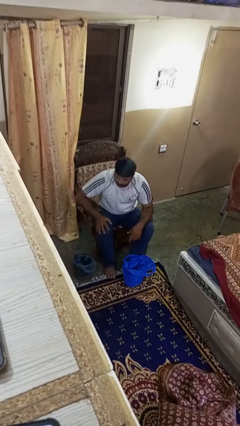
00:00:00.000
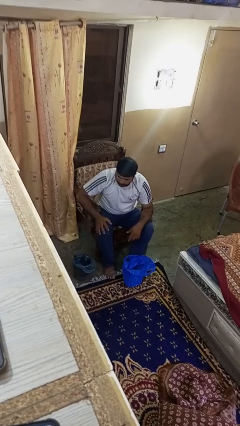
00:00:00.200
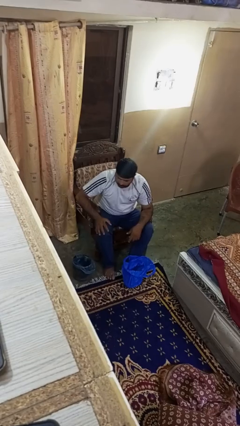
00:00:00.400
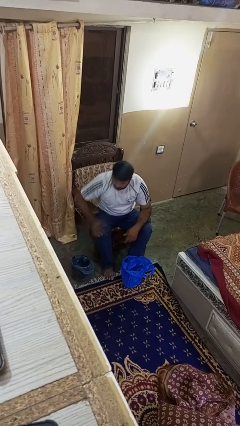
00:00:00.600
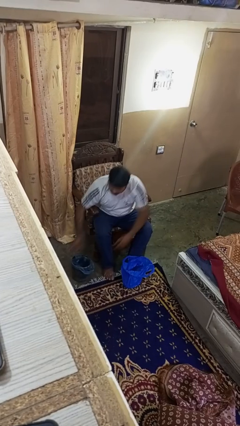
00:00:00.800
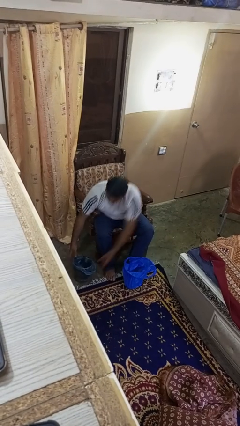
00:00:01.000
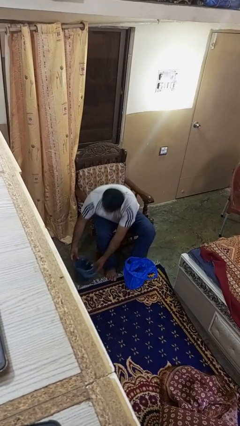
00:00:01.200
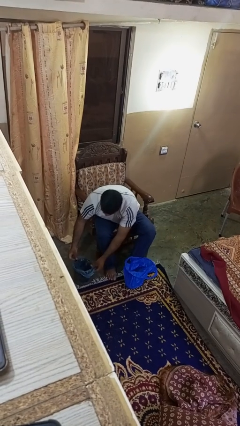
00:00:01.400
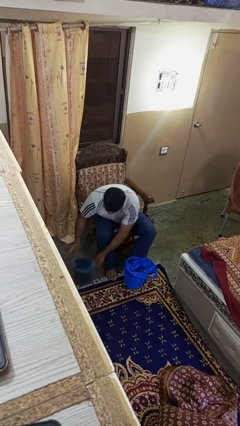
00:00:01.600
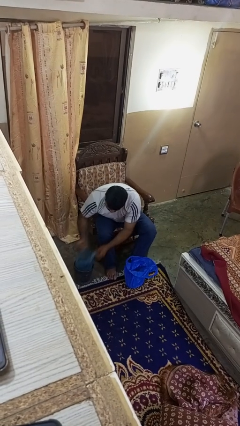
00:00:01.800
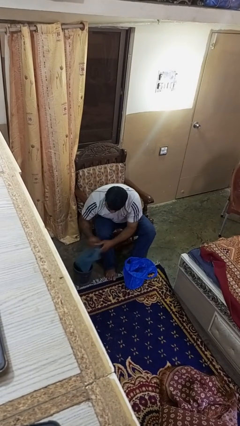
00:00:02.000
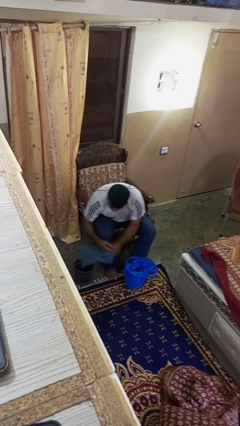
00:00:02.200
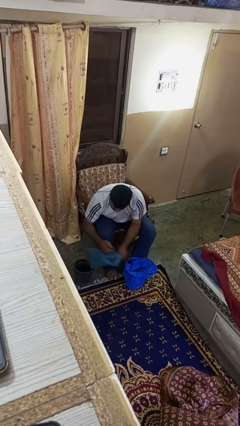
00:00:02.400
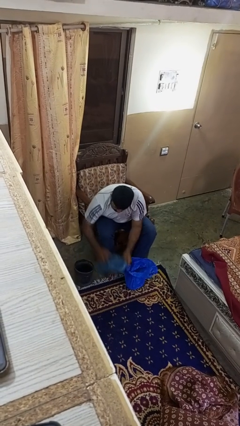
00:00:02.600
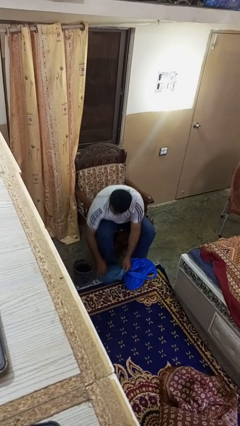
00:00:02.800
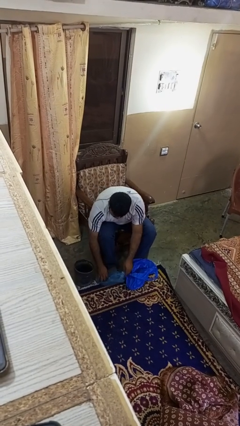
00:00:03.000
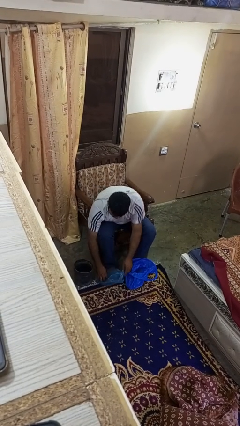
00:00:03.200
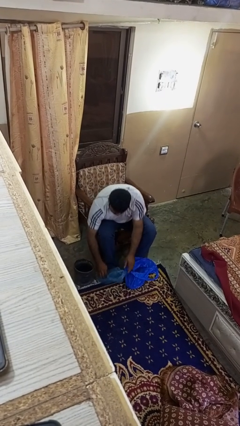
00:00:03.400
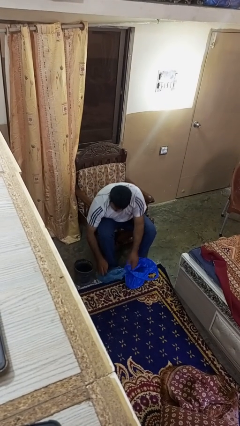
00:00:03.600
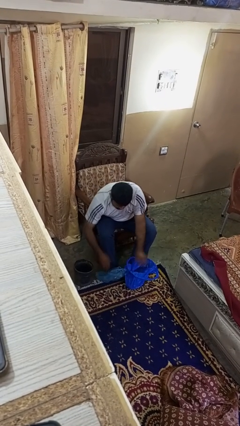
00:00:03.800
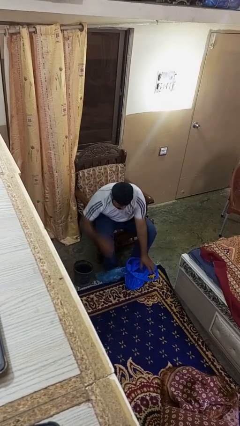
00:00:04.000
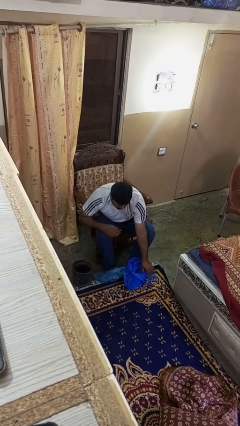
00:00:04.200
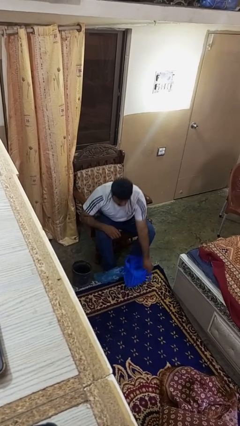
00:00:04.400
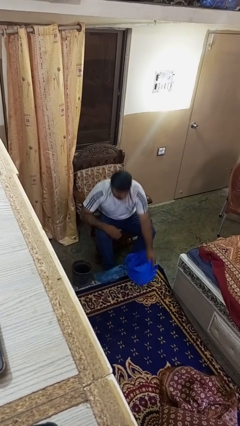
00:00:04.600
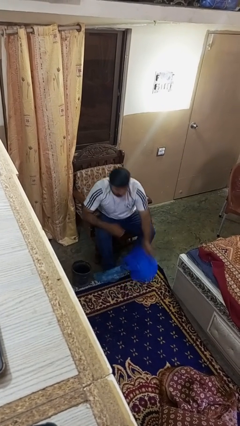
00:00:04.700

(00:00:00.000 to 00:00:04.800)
person removes trashbag from trashcan

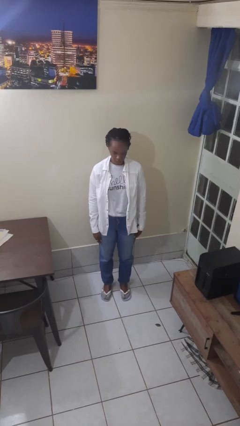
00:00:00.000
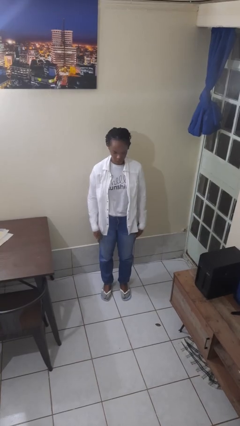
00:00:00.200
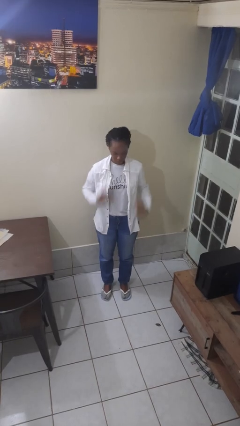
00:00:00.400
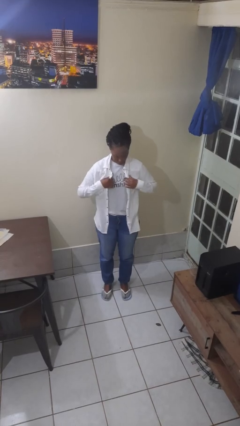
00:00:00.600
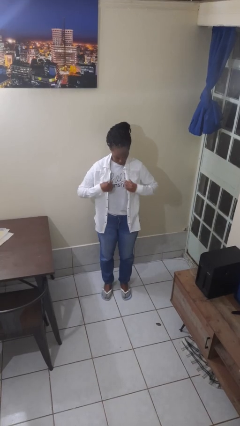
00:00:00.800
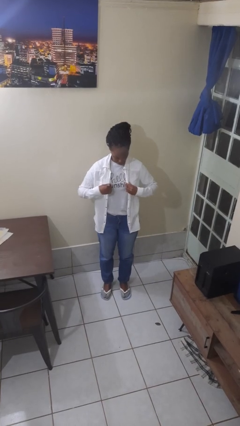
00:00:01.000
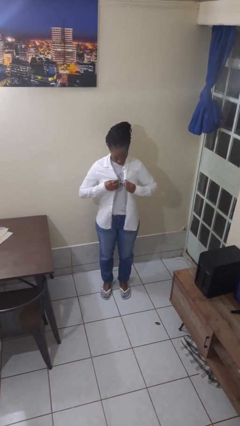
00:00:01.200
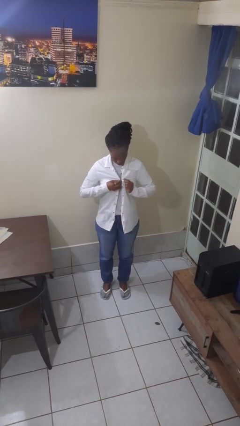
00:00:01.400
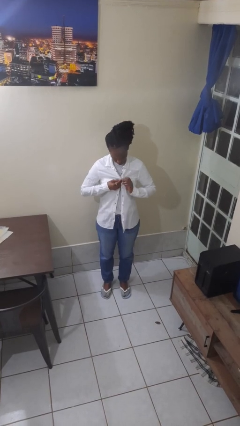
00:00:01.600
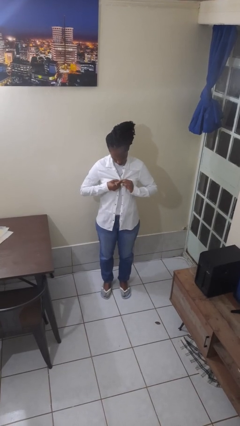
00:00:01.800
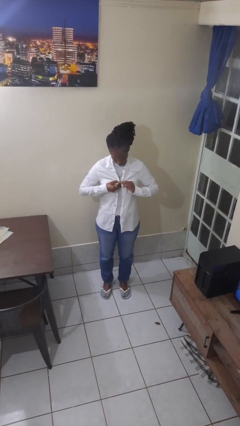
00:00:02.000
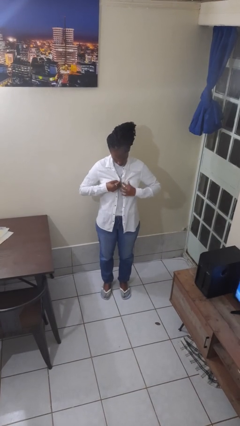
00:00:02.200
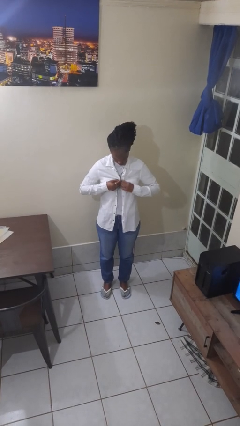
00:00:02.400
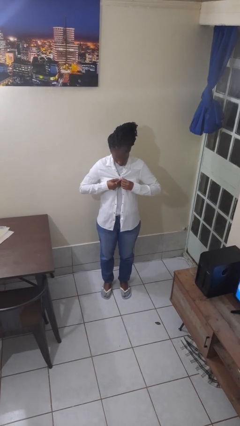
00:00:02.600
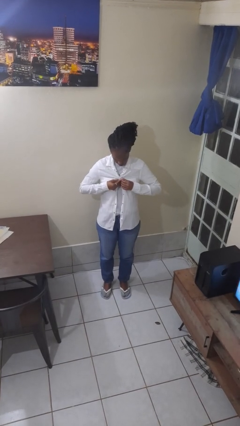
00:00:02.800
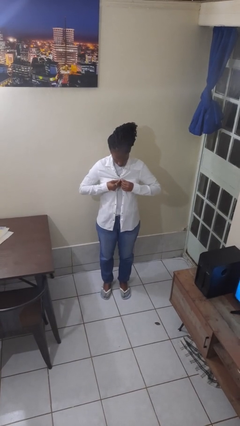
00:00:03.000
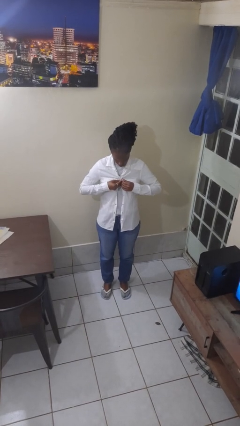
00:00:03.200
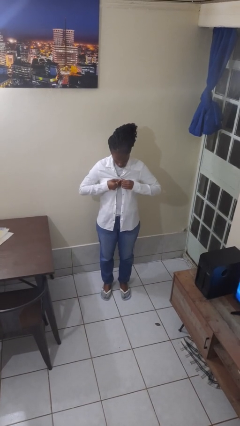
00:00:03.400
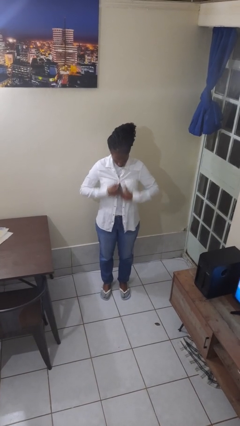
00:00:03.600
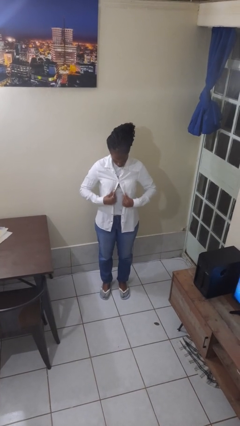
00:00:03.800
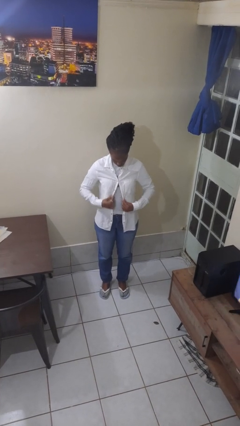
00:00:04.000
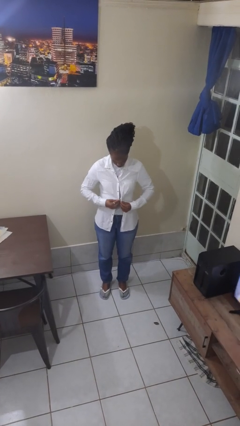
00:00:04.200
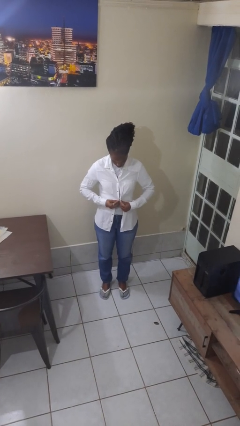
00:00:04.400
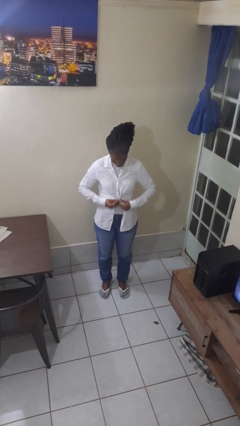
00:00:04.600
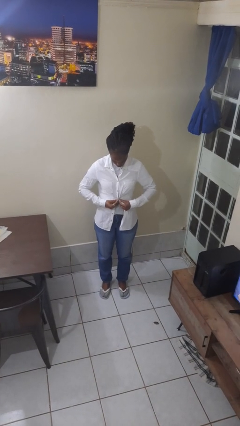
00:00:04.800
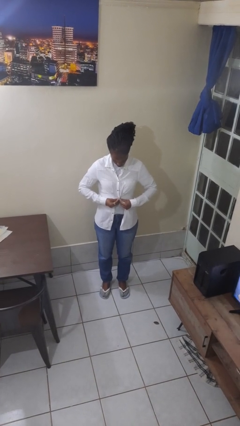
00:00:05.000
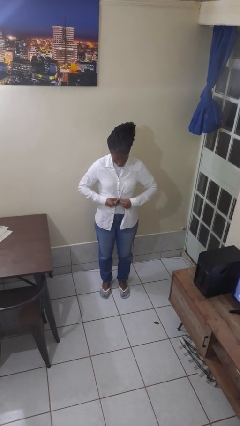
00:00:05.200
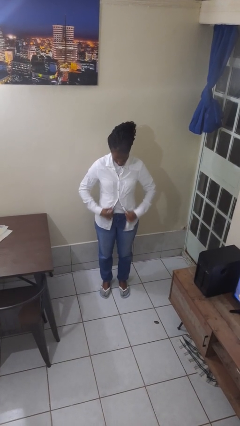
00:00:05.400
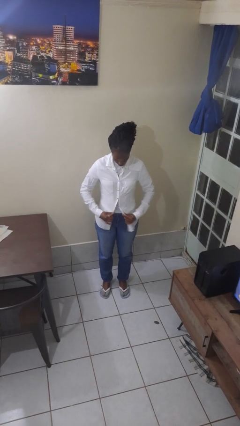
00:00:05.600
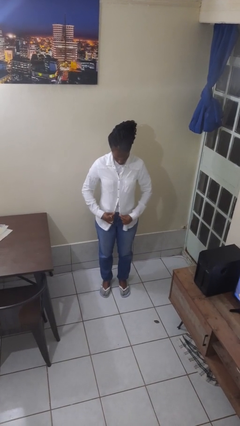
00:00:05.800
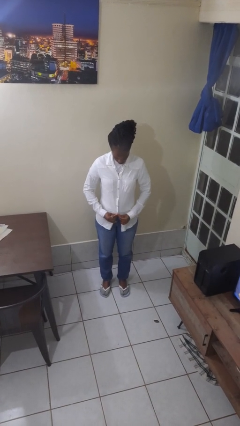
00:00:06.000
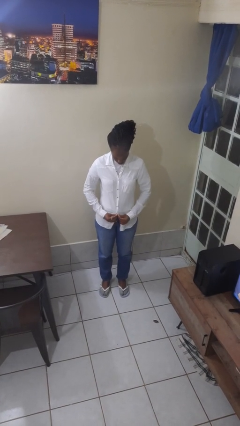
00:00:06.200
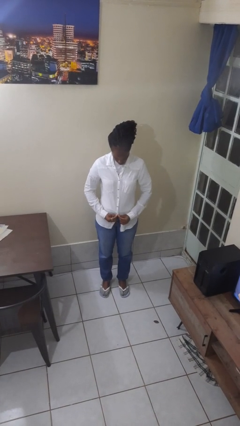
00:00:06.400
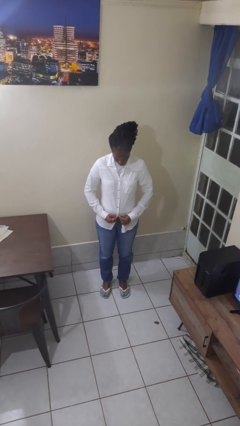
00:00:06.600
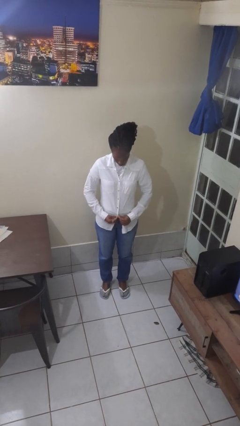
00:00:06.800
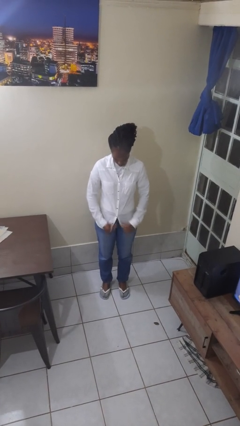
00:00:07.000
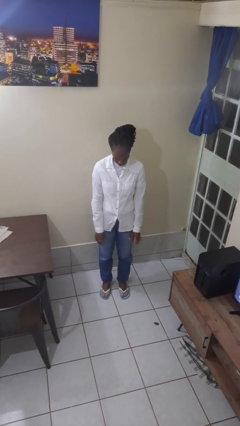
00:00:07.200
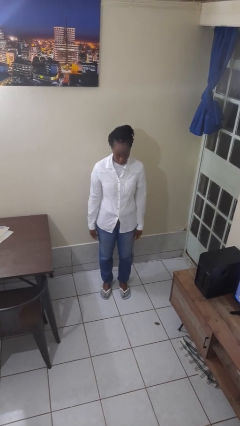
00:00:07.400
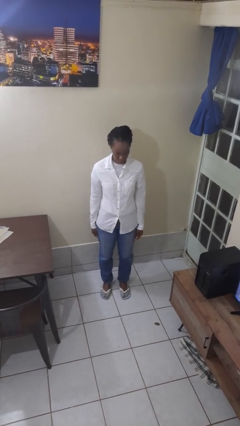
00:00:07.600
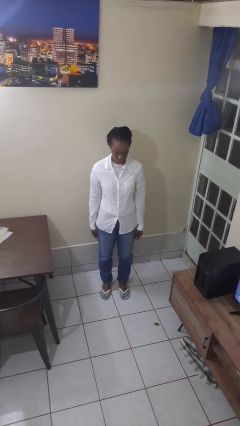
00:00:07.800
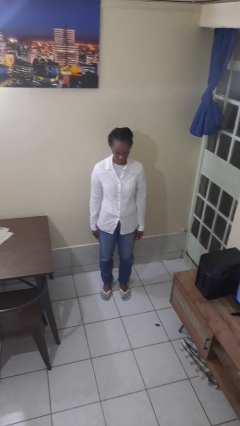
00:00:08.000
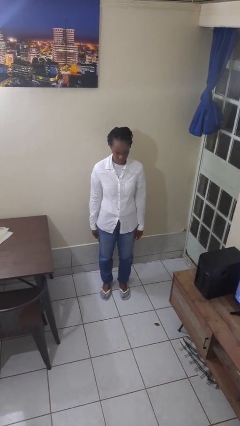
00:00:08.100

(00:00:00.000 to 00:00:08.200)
person buttons shirt

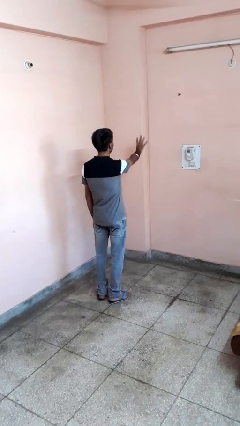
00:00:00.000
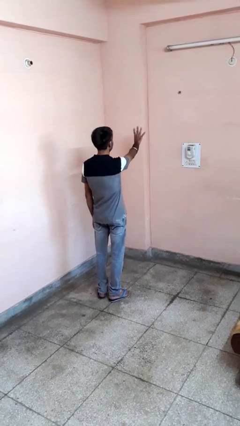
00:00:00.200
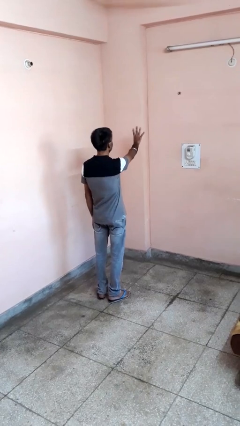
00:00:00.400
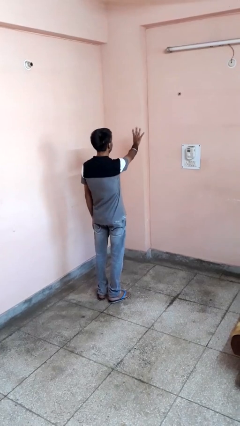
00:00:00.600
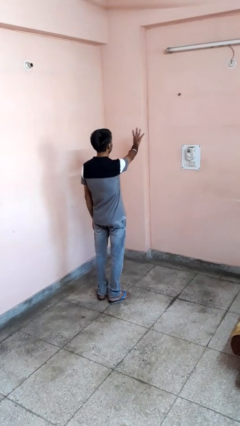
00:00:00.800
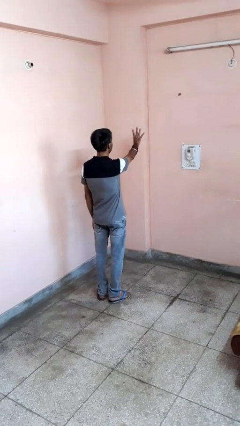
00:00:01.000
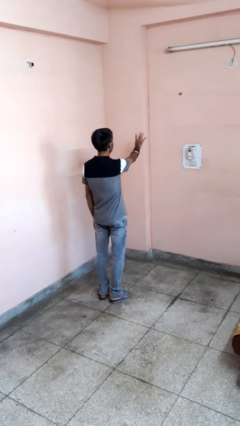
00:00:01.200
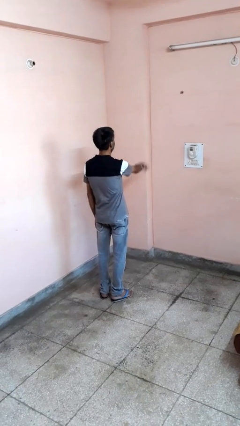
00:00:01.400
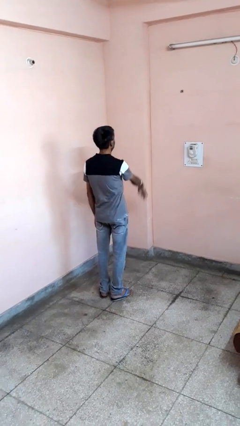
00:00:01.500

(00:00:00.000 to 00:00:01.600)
person gestures number four

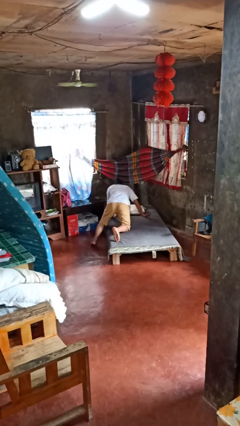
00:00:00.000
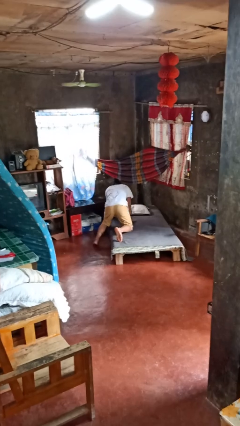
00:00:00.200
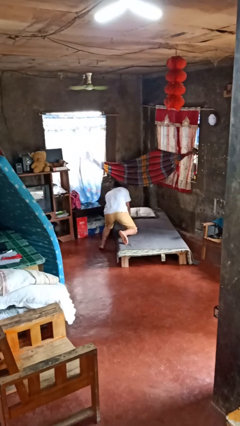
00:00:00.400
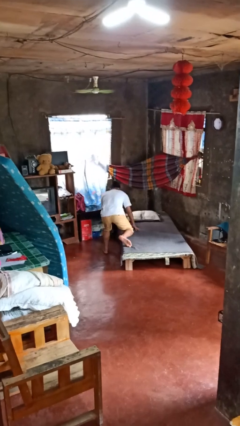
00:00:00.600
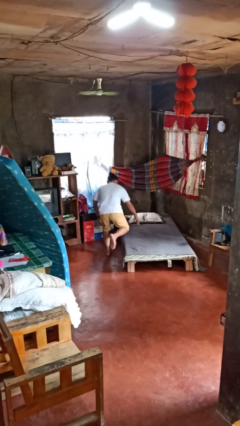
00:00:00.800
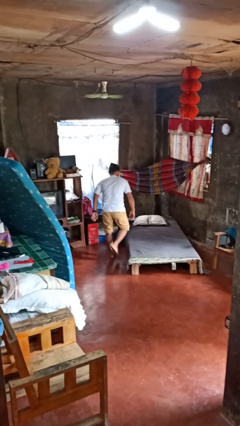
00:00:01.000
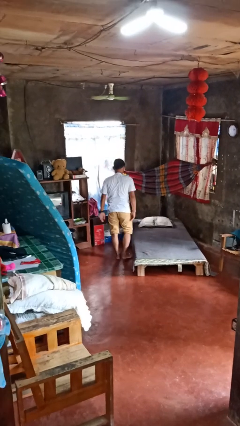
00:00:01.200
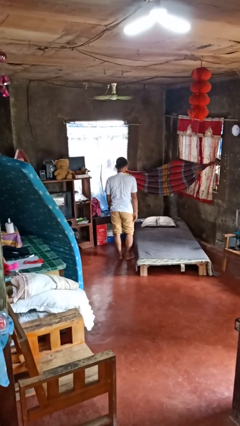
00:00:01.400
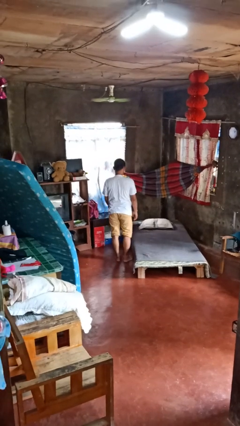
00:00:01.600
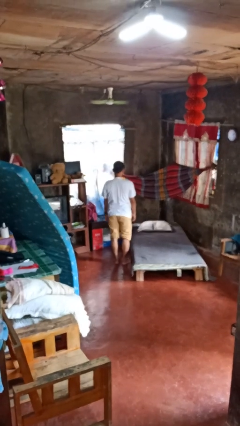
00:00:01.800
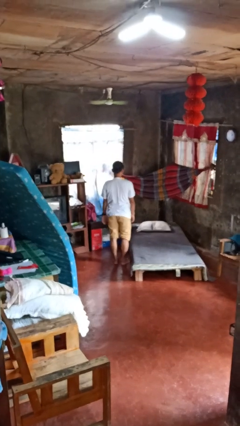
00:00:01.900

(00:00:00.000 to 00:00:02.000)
person stands up

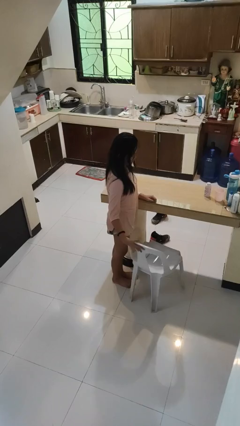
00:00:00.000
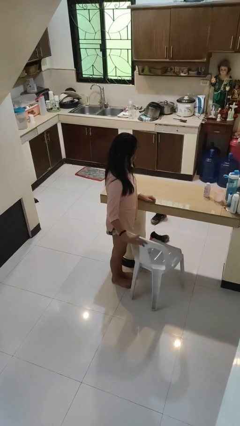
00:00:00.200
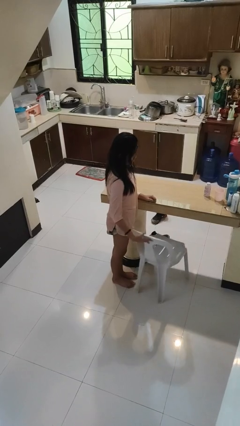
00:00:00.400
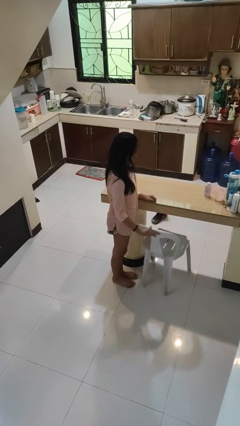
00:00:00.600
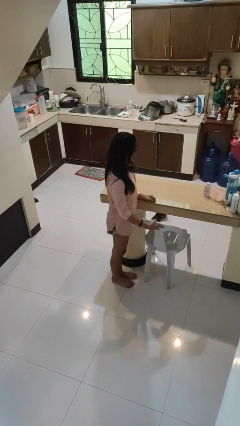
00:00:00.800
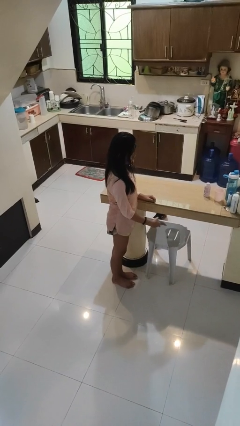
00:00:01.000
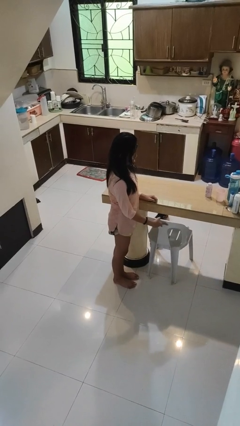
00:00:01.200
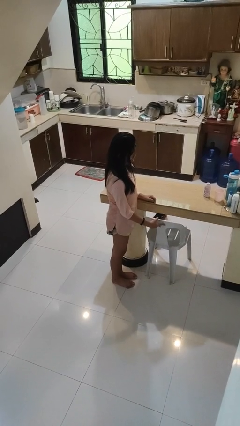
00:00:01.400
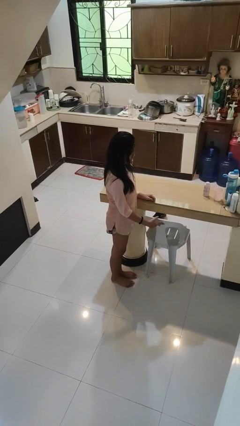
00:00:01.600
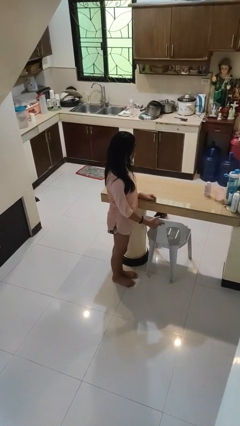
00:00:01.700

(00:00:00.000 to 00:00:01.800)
person pushes in chair
